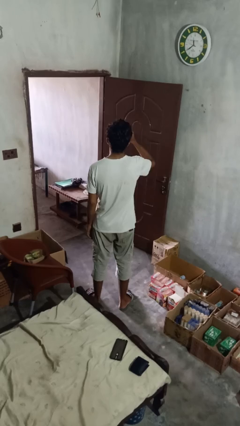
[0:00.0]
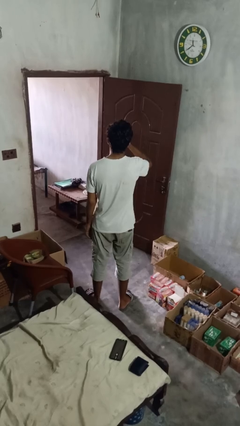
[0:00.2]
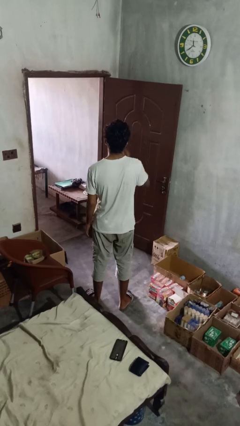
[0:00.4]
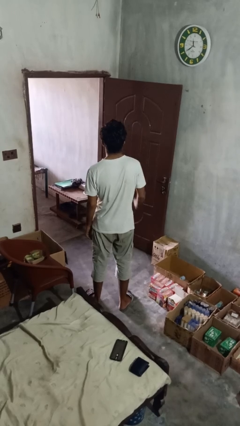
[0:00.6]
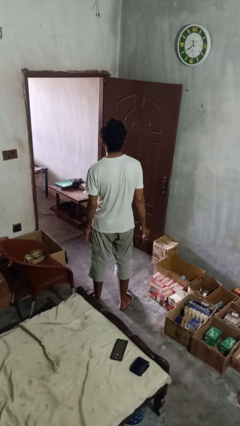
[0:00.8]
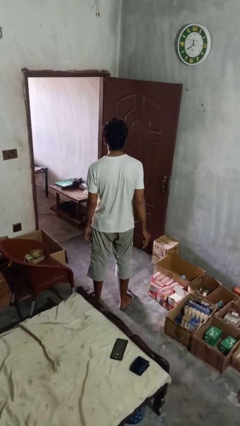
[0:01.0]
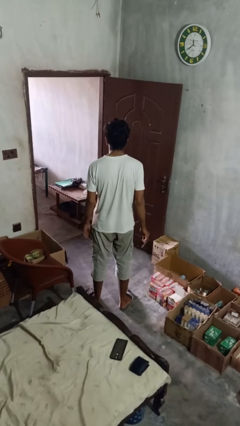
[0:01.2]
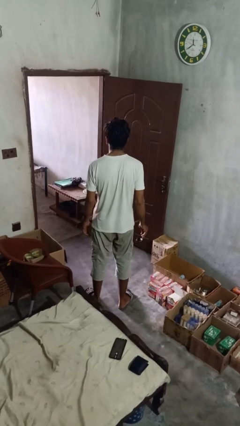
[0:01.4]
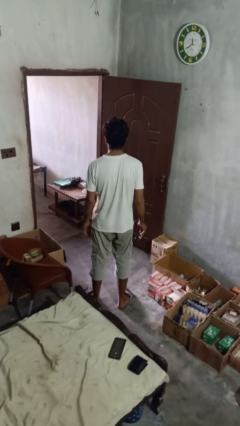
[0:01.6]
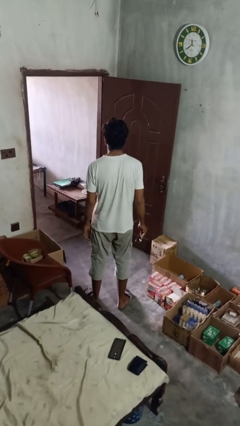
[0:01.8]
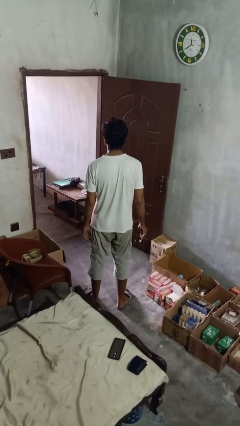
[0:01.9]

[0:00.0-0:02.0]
person takes off glasses

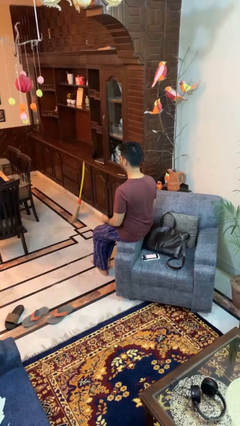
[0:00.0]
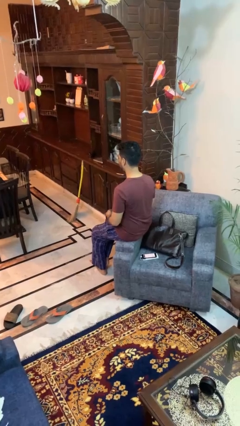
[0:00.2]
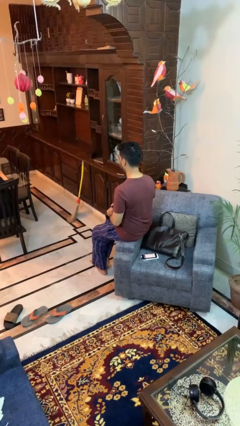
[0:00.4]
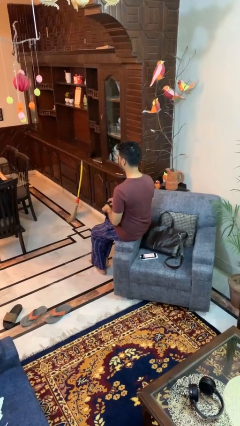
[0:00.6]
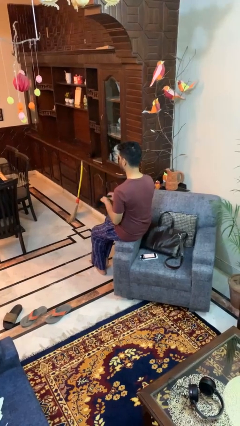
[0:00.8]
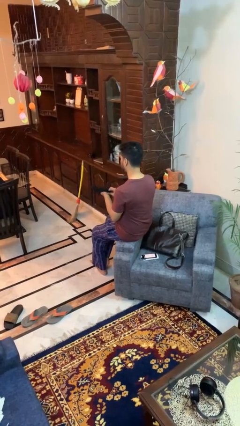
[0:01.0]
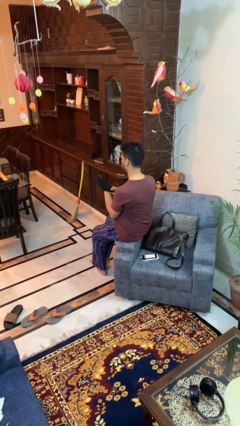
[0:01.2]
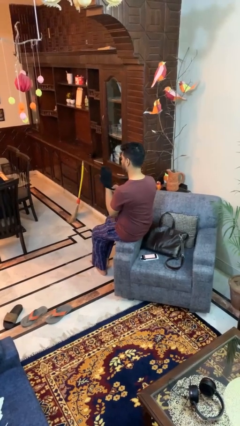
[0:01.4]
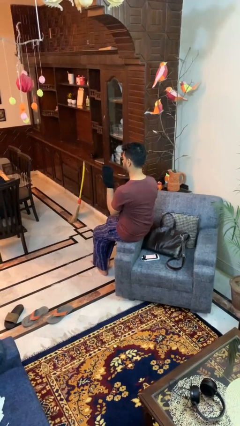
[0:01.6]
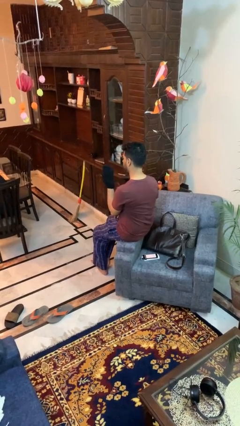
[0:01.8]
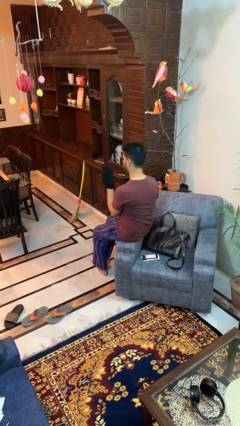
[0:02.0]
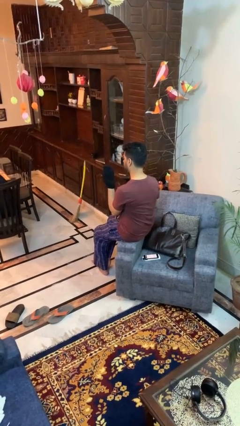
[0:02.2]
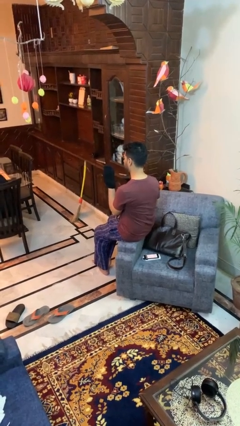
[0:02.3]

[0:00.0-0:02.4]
person puts on gloves

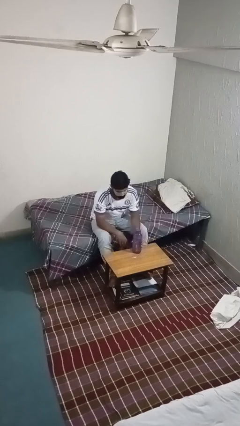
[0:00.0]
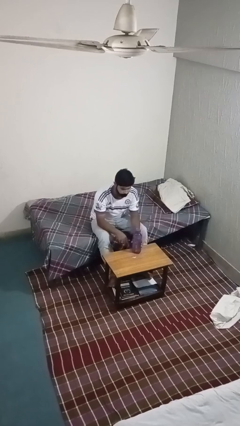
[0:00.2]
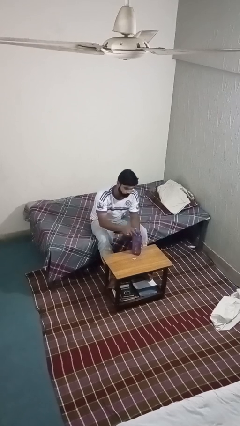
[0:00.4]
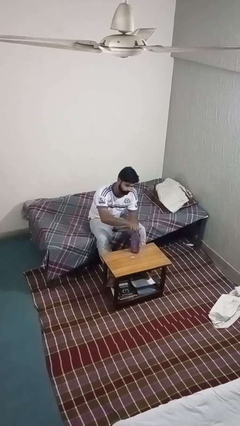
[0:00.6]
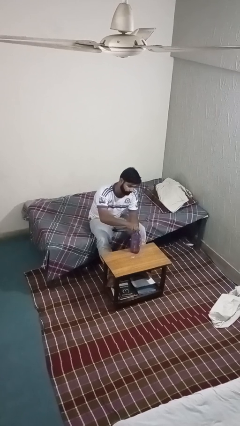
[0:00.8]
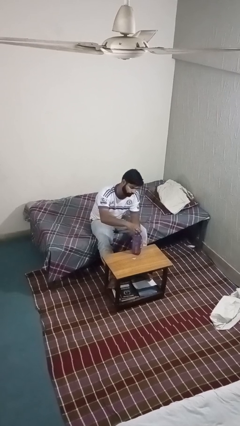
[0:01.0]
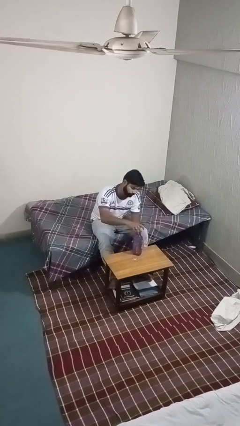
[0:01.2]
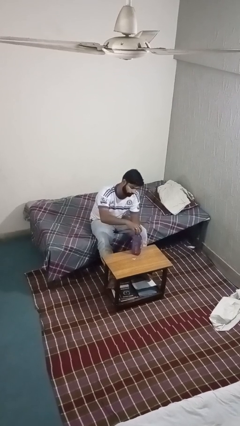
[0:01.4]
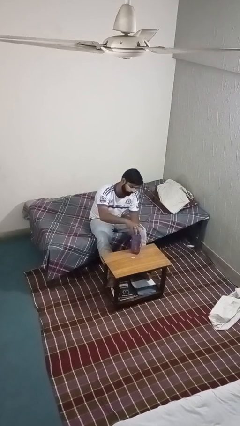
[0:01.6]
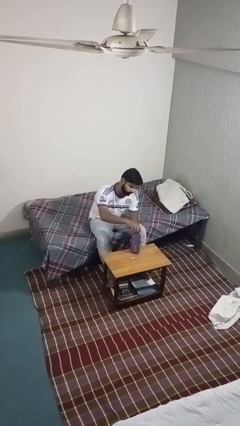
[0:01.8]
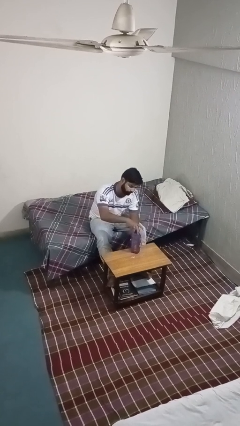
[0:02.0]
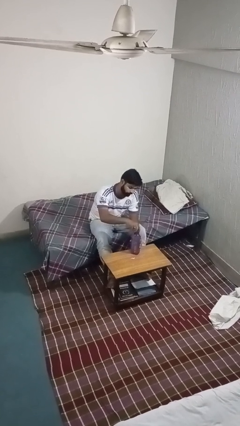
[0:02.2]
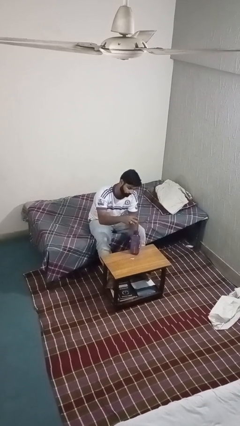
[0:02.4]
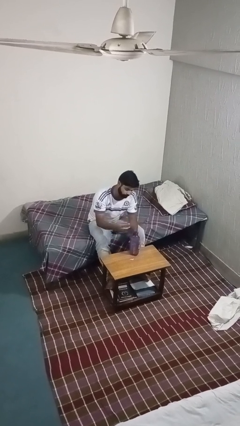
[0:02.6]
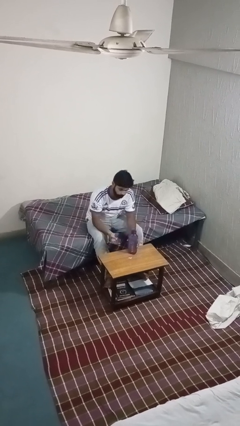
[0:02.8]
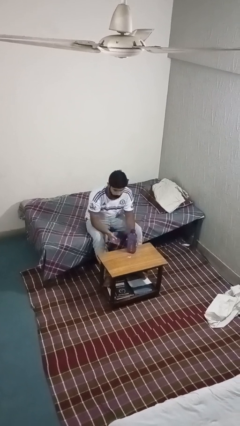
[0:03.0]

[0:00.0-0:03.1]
person unscrews lid from bottle

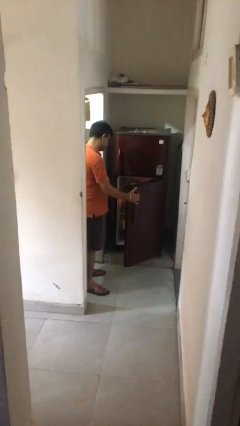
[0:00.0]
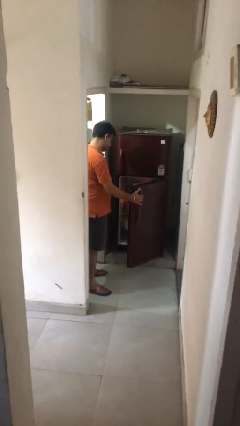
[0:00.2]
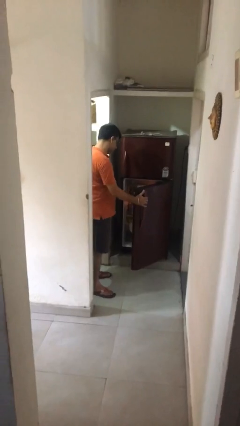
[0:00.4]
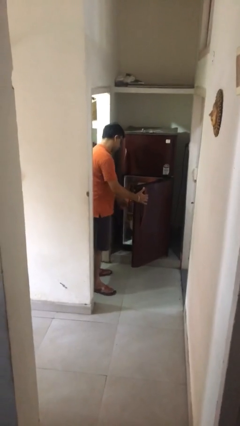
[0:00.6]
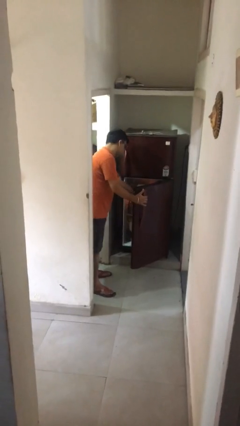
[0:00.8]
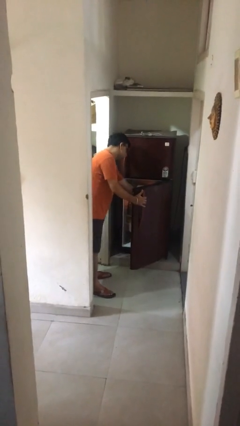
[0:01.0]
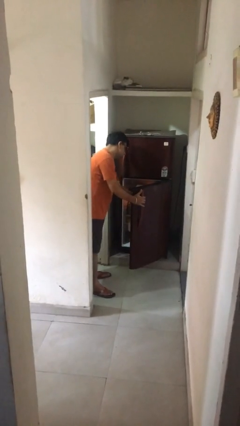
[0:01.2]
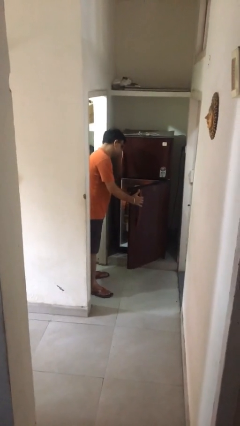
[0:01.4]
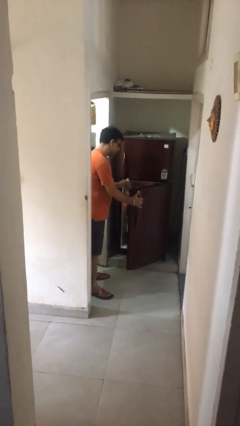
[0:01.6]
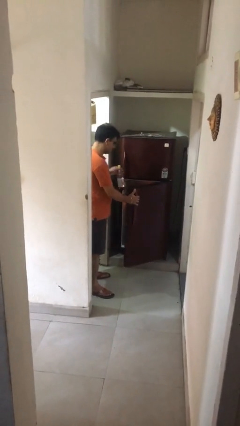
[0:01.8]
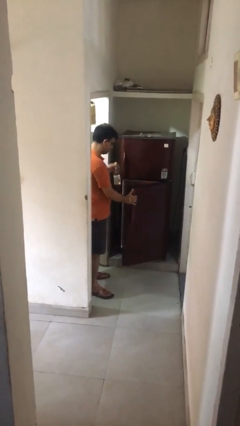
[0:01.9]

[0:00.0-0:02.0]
person takes object from refrigerator

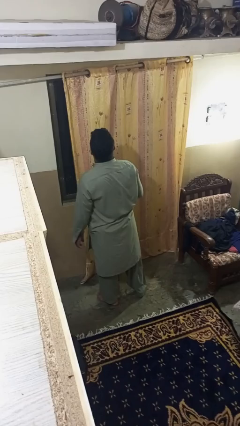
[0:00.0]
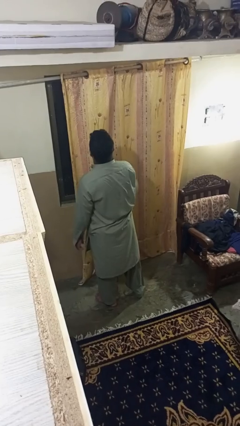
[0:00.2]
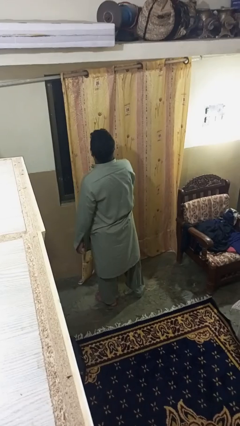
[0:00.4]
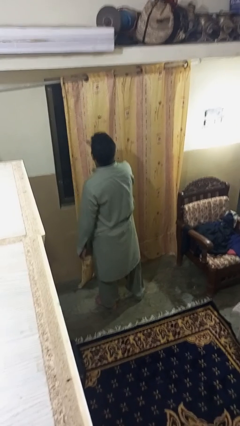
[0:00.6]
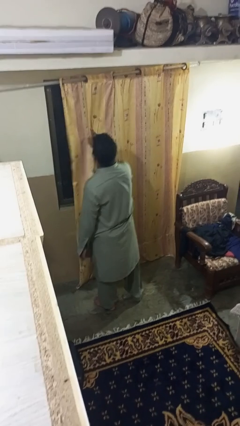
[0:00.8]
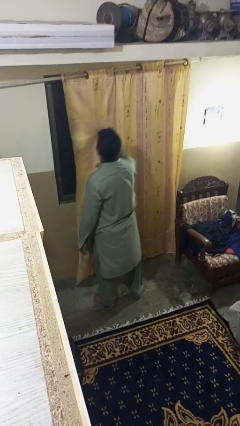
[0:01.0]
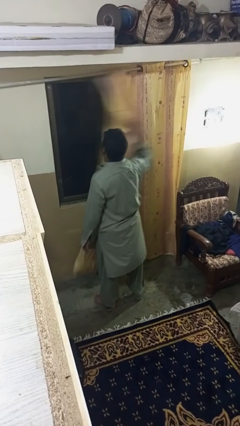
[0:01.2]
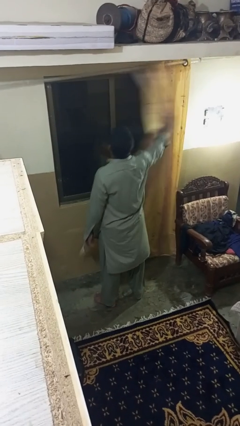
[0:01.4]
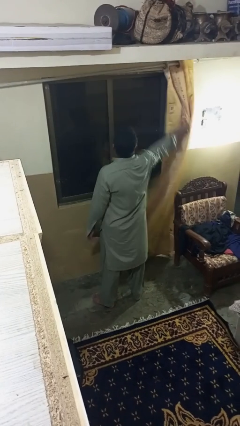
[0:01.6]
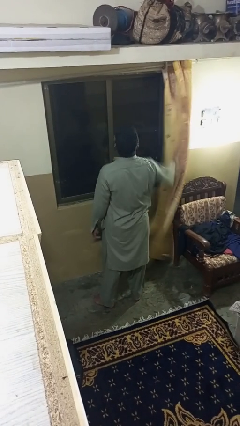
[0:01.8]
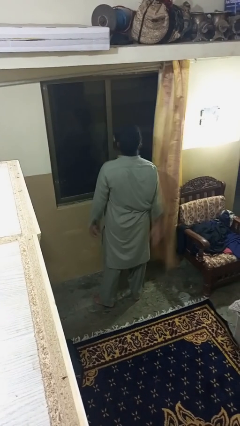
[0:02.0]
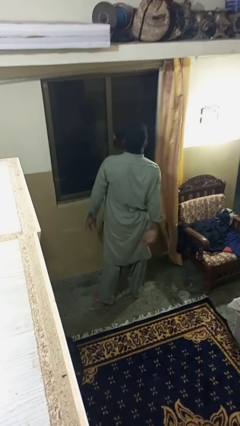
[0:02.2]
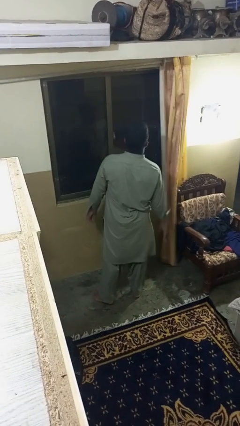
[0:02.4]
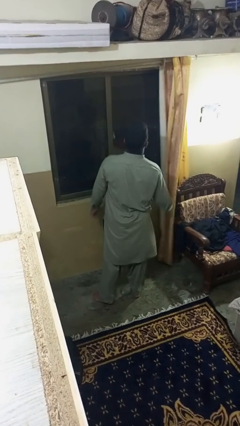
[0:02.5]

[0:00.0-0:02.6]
person opens curtains

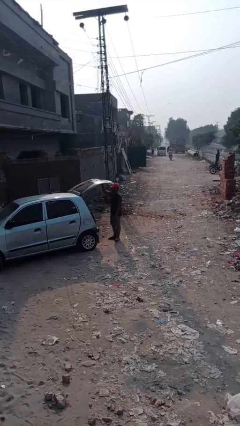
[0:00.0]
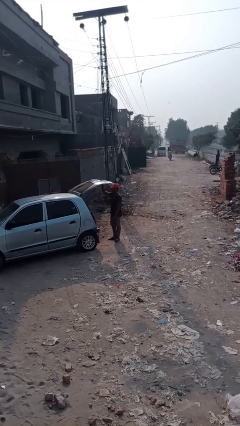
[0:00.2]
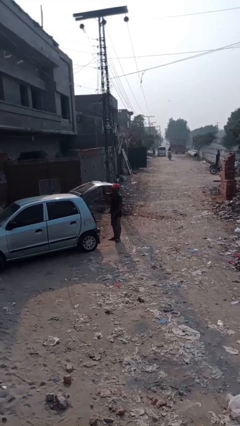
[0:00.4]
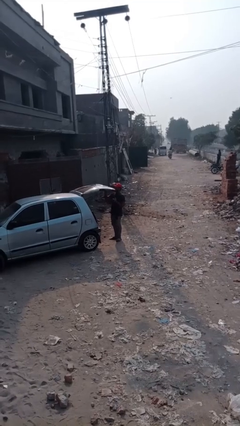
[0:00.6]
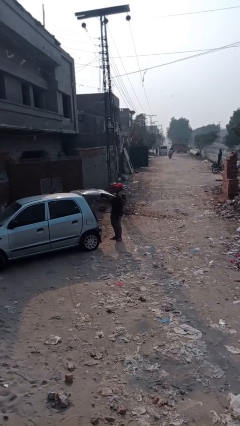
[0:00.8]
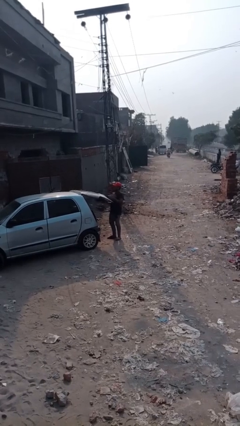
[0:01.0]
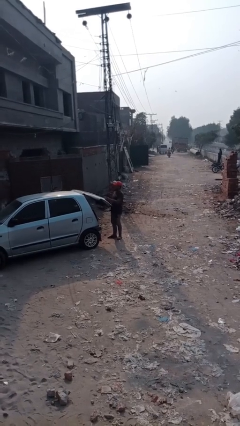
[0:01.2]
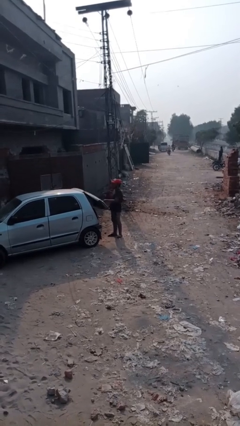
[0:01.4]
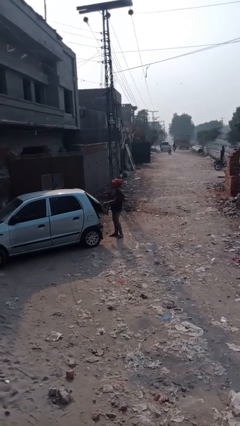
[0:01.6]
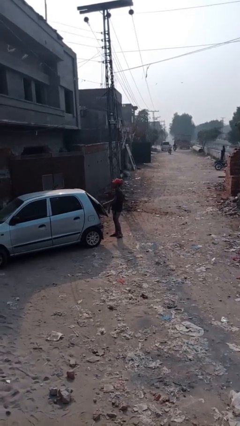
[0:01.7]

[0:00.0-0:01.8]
person closes car trunk

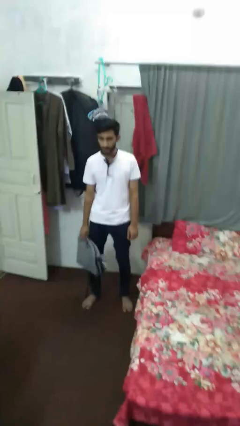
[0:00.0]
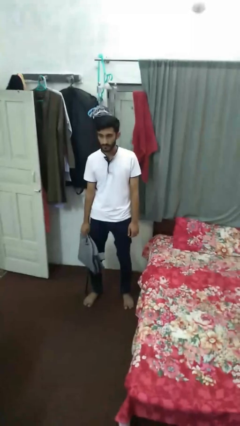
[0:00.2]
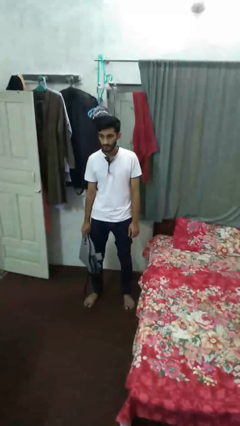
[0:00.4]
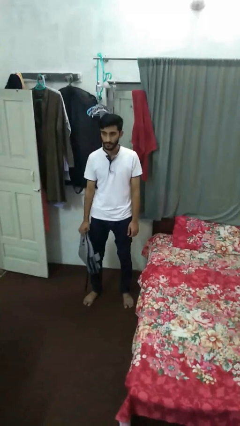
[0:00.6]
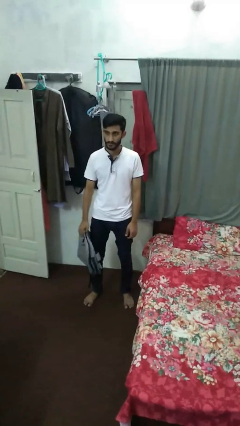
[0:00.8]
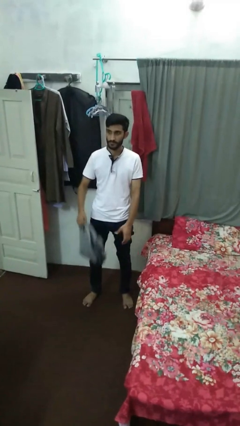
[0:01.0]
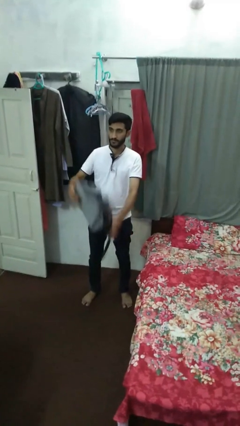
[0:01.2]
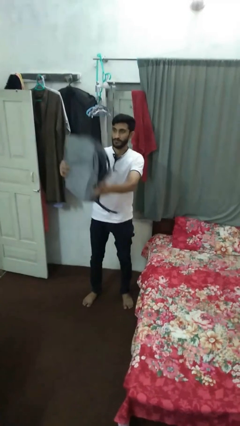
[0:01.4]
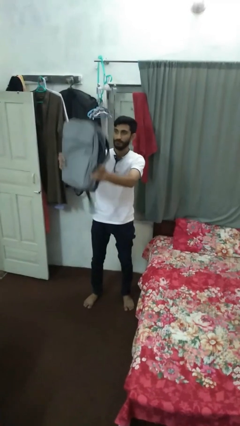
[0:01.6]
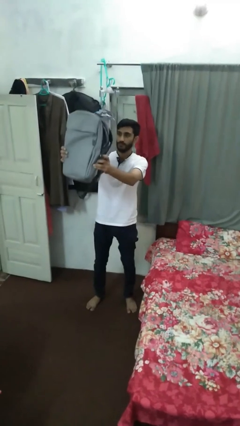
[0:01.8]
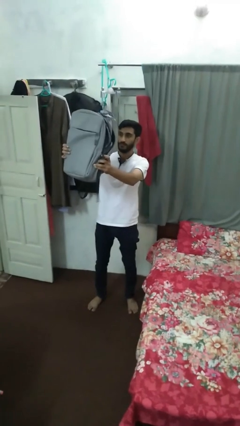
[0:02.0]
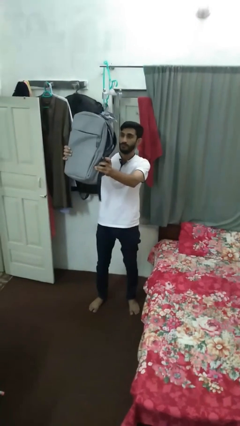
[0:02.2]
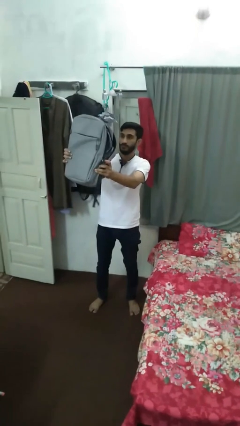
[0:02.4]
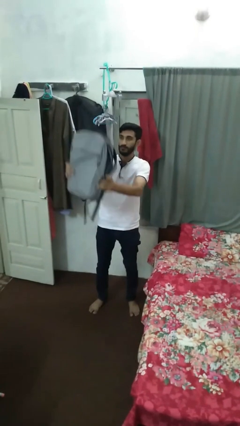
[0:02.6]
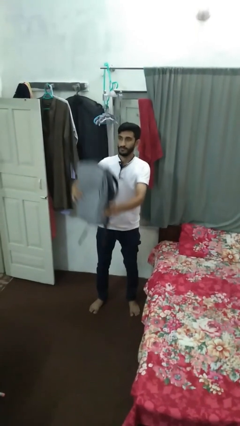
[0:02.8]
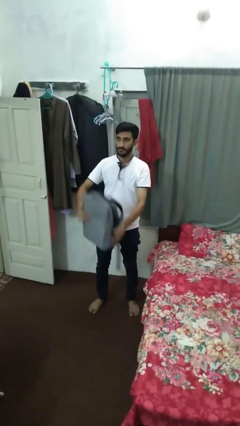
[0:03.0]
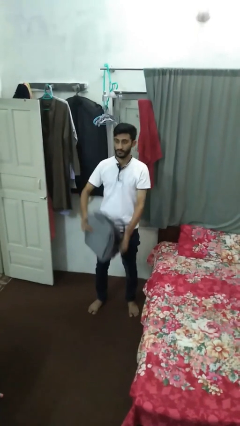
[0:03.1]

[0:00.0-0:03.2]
person holds object above head
